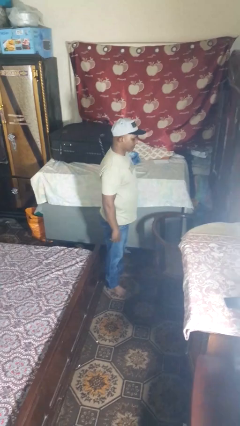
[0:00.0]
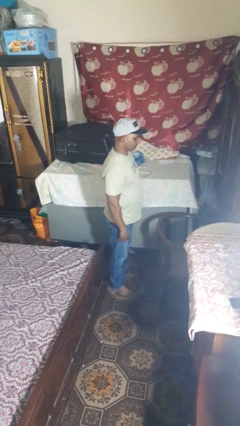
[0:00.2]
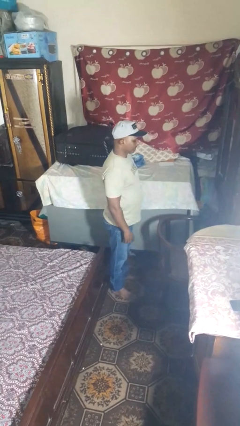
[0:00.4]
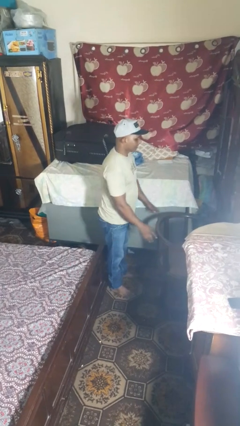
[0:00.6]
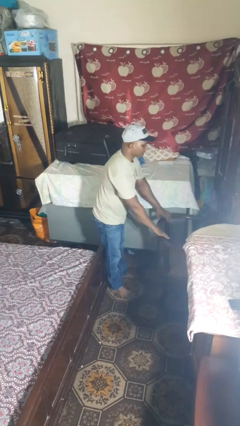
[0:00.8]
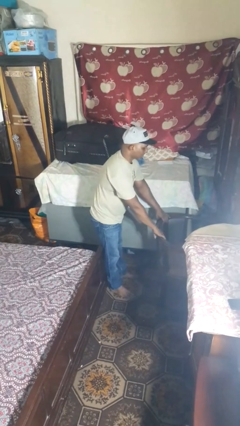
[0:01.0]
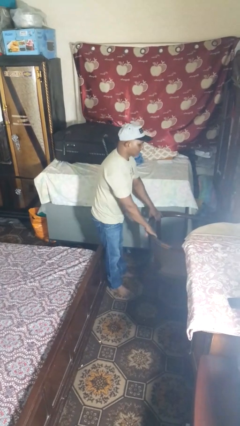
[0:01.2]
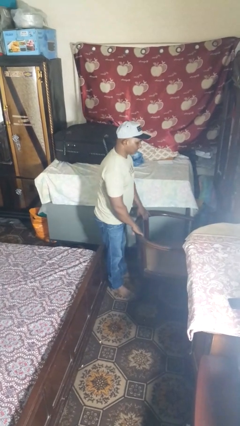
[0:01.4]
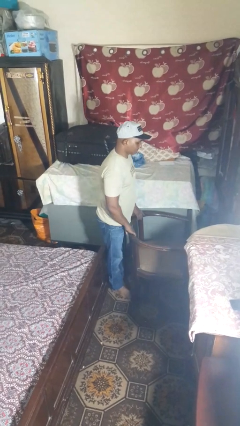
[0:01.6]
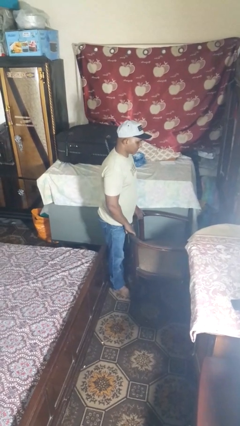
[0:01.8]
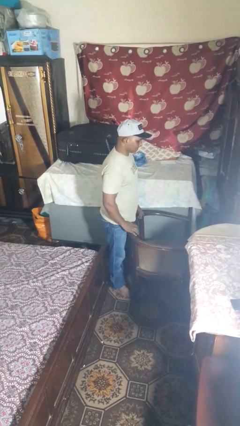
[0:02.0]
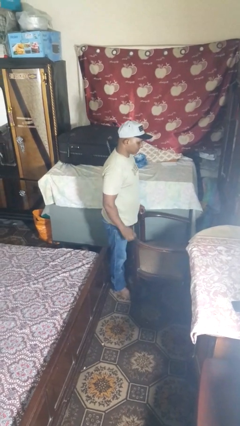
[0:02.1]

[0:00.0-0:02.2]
person pulls out chair

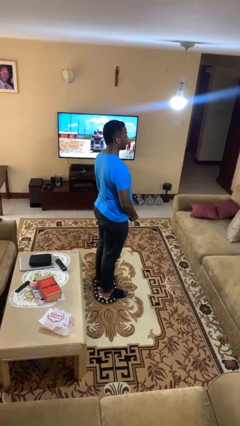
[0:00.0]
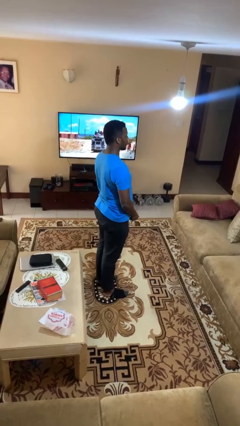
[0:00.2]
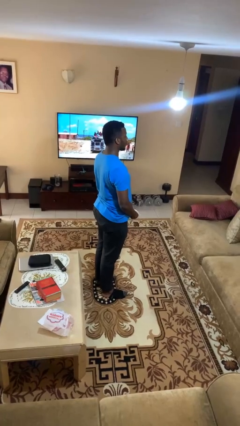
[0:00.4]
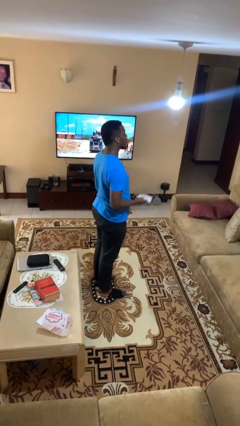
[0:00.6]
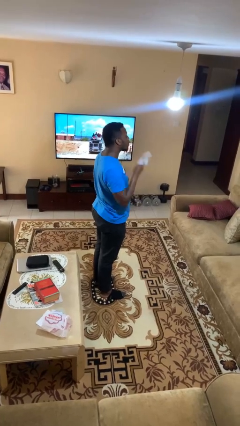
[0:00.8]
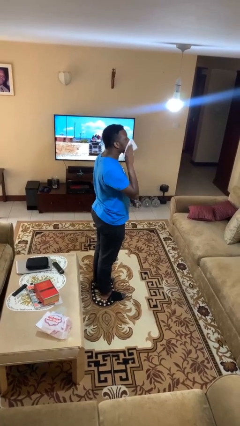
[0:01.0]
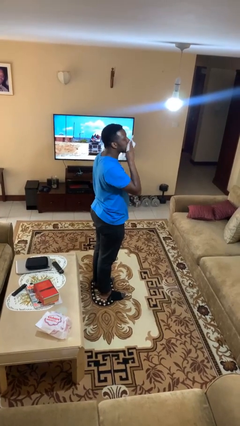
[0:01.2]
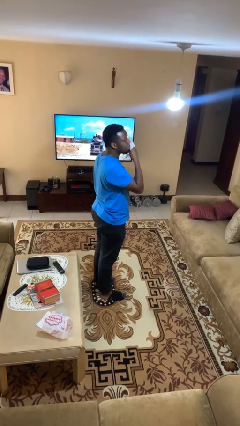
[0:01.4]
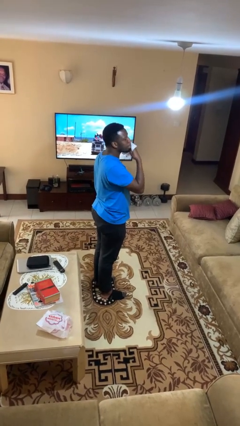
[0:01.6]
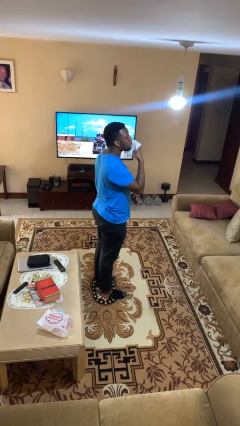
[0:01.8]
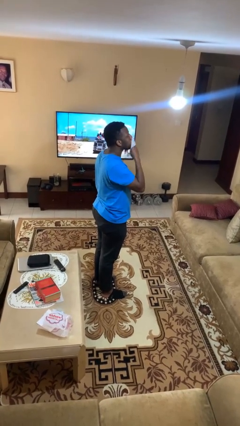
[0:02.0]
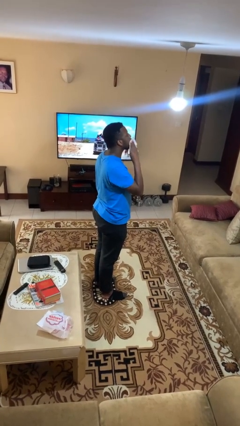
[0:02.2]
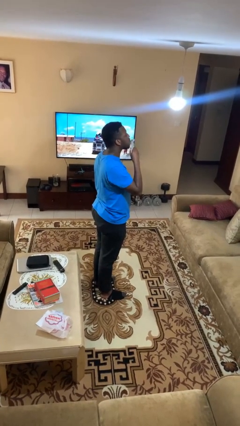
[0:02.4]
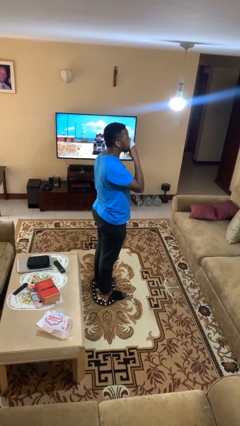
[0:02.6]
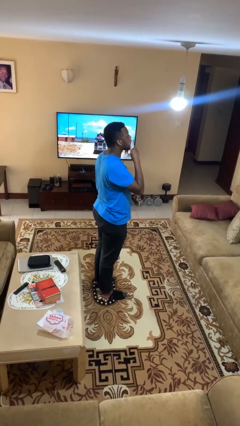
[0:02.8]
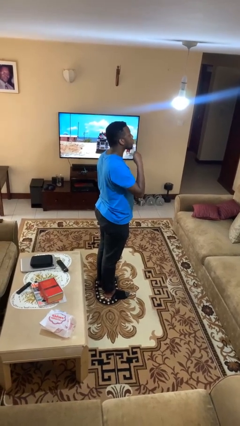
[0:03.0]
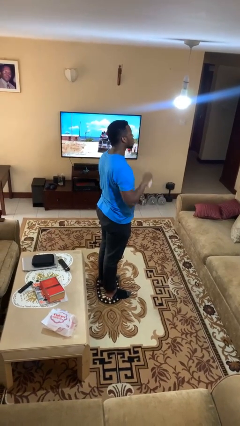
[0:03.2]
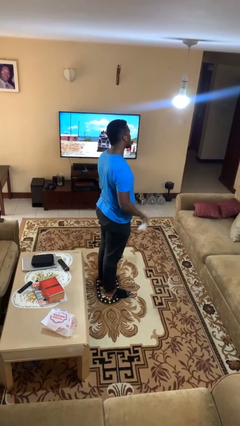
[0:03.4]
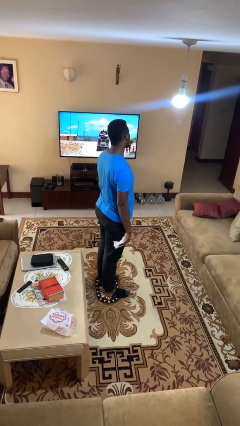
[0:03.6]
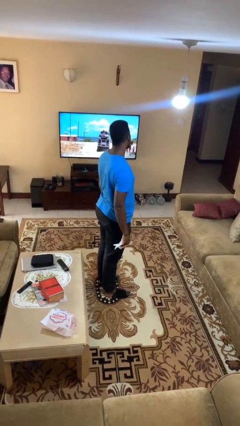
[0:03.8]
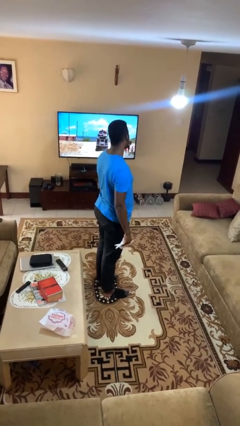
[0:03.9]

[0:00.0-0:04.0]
person wipes mouth with napkin

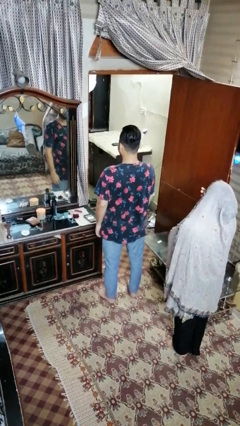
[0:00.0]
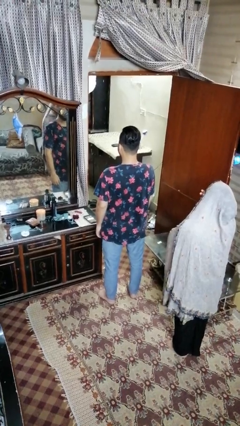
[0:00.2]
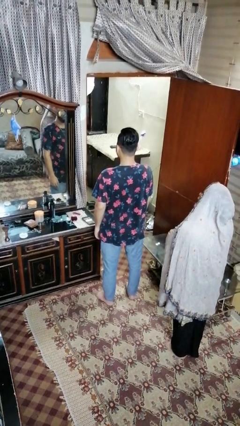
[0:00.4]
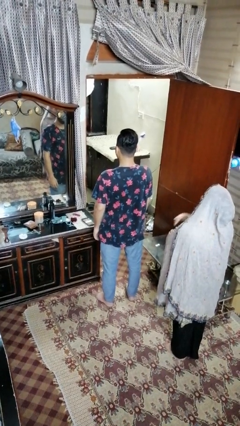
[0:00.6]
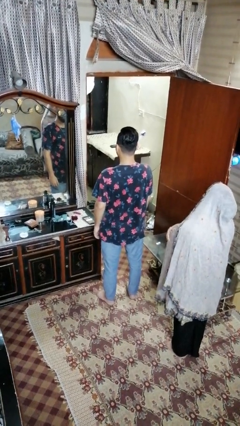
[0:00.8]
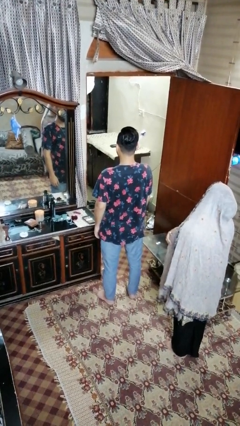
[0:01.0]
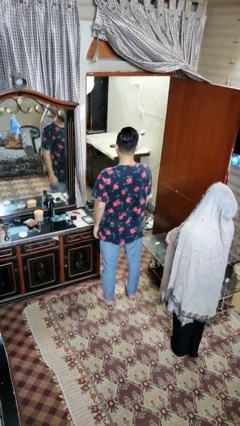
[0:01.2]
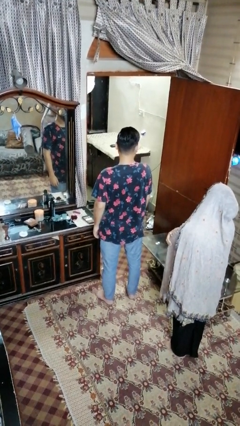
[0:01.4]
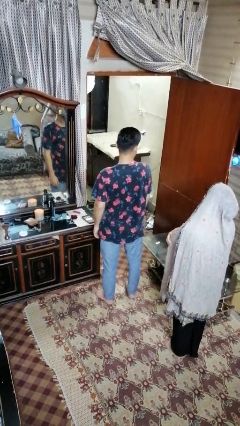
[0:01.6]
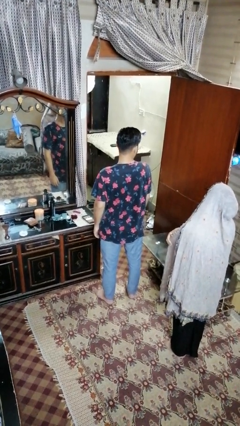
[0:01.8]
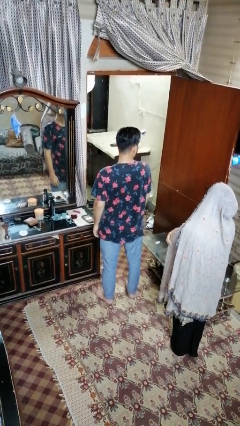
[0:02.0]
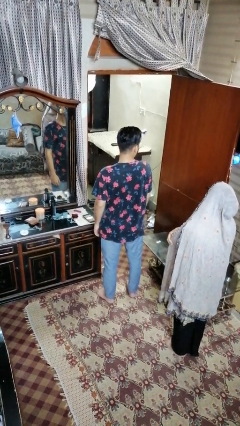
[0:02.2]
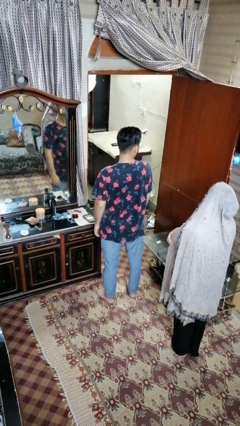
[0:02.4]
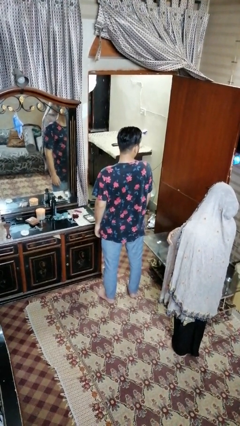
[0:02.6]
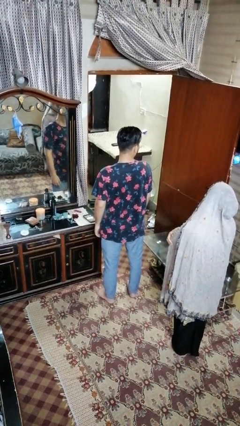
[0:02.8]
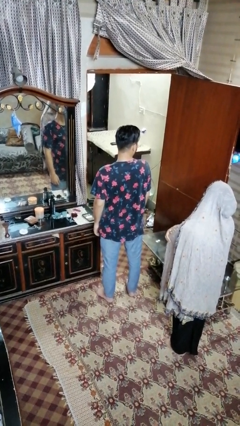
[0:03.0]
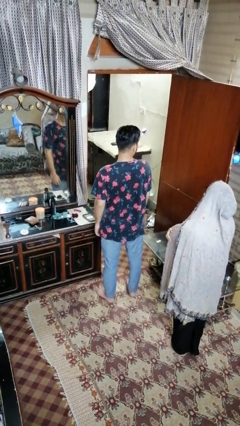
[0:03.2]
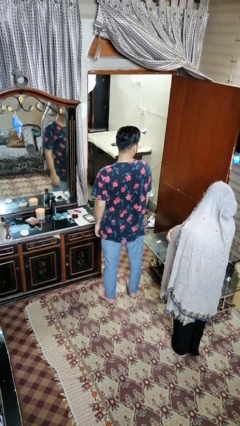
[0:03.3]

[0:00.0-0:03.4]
person looks over shoulder

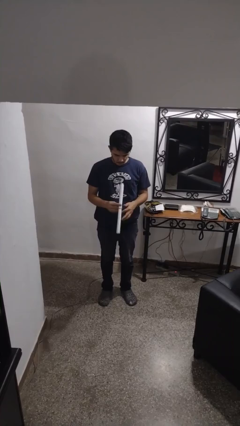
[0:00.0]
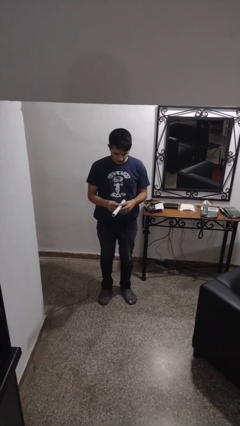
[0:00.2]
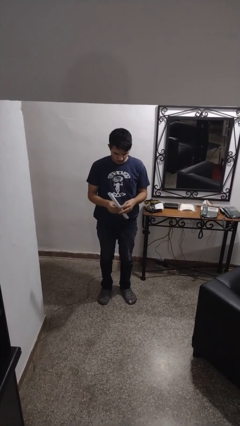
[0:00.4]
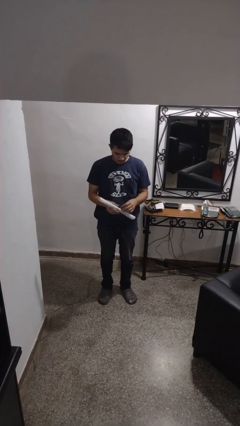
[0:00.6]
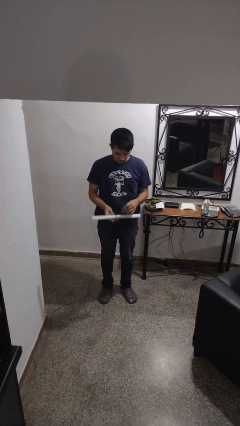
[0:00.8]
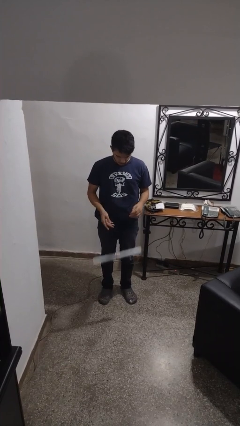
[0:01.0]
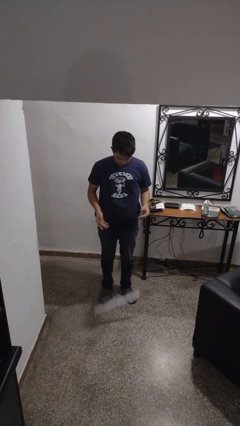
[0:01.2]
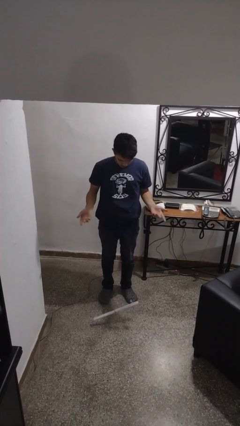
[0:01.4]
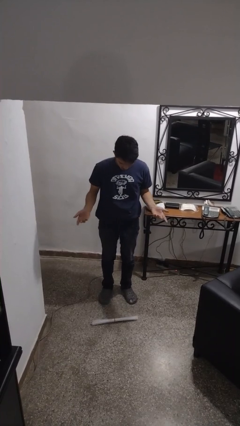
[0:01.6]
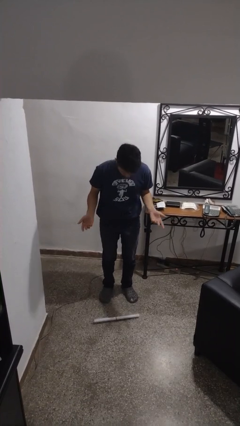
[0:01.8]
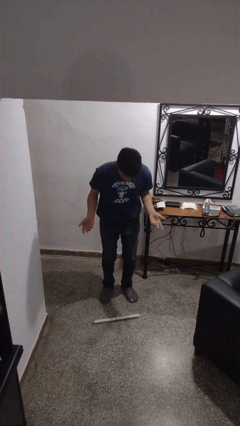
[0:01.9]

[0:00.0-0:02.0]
person drops object

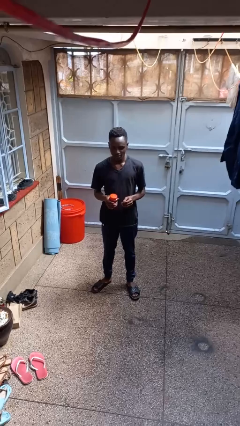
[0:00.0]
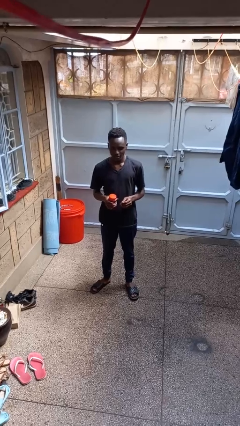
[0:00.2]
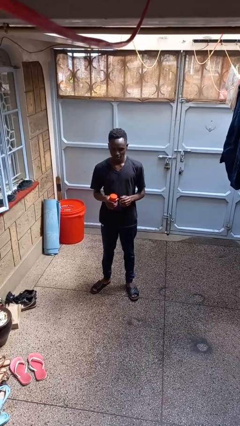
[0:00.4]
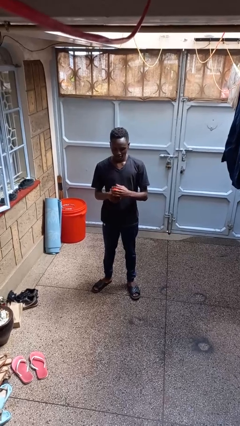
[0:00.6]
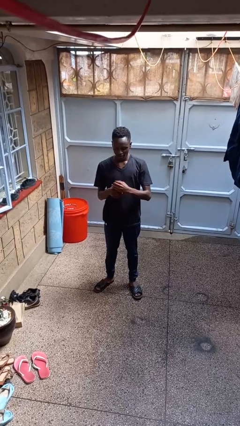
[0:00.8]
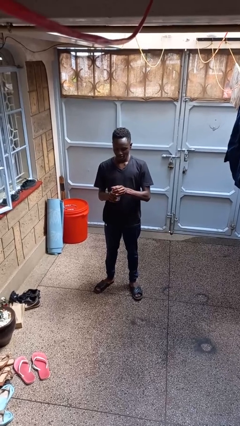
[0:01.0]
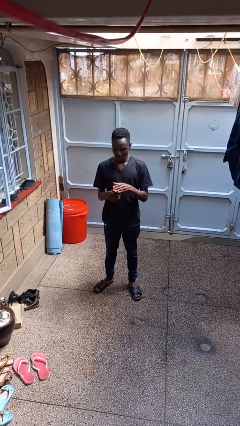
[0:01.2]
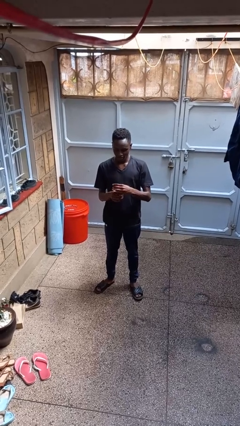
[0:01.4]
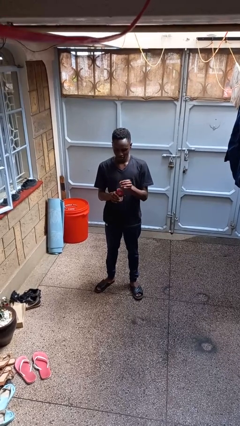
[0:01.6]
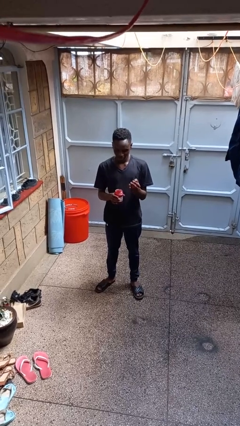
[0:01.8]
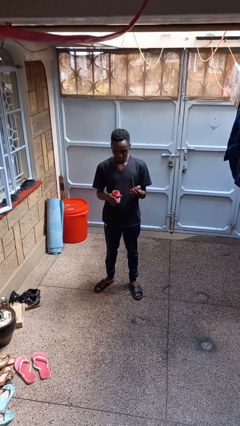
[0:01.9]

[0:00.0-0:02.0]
person opens jar

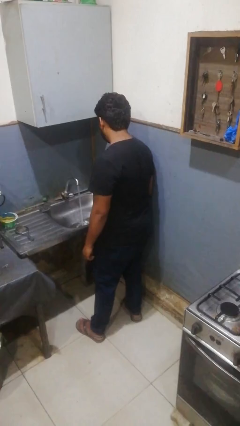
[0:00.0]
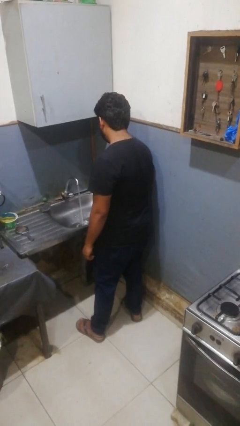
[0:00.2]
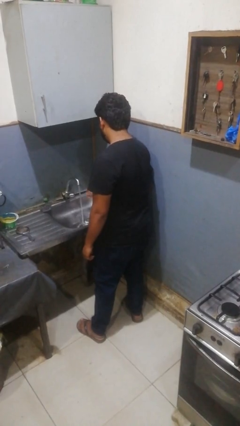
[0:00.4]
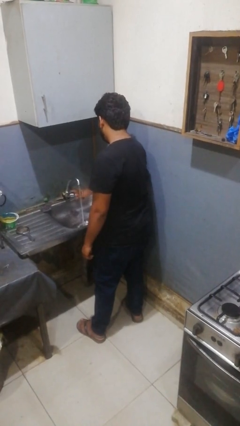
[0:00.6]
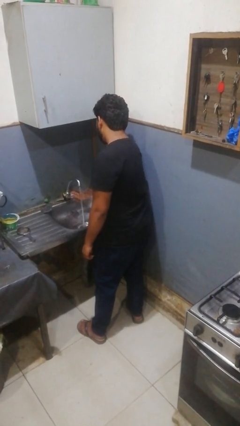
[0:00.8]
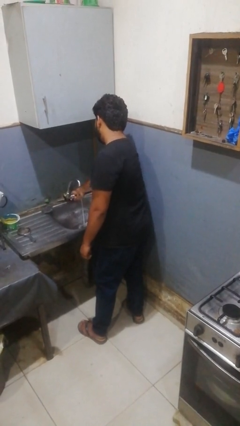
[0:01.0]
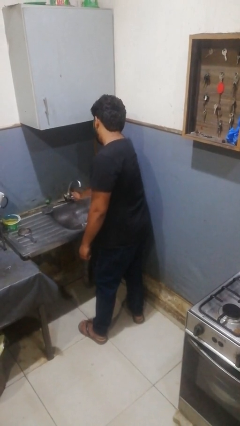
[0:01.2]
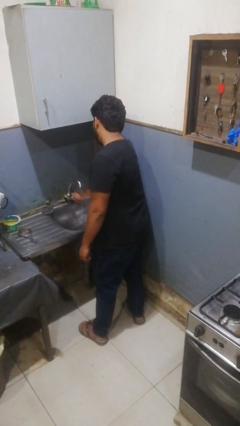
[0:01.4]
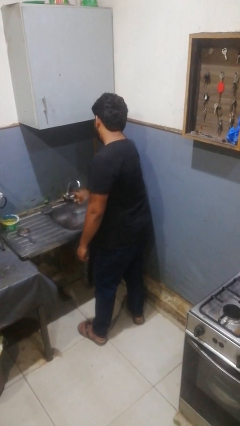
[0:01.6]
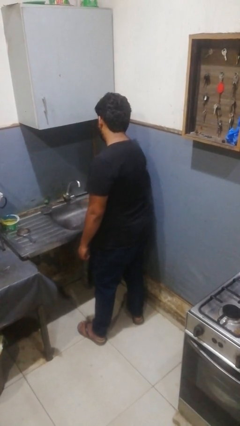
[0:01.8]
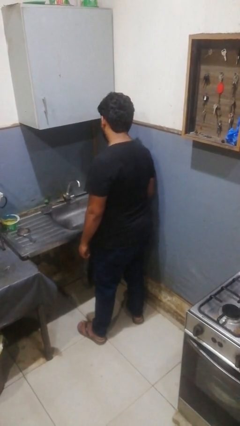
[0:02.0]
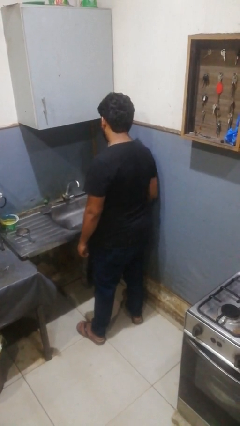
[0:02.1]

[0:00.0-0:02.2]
person turns off faucet

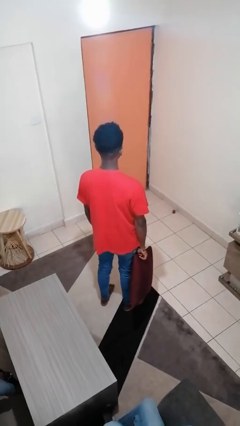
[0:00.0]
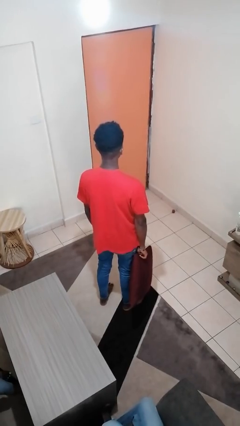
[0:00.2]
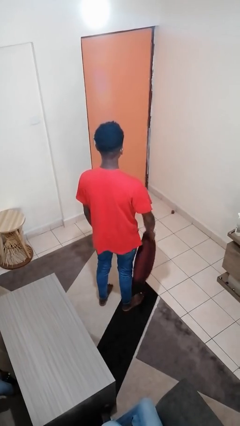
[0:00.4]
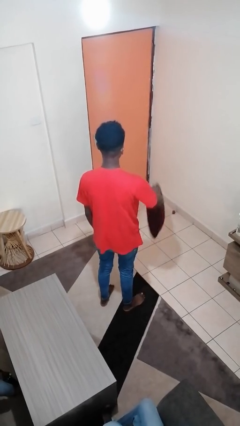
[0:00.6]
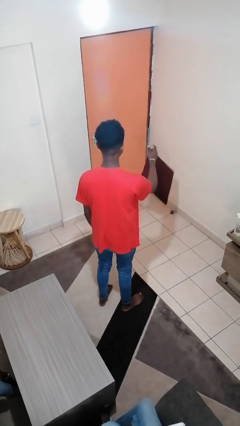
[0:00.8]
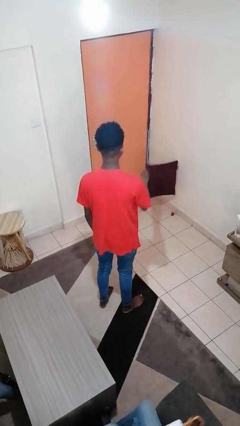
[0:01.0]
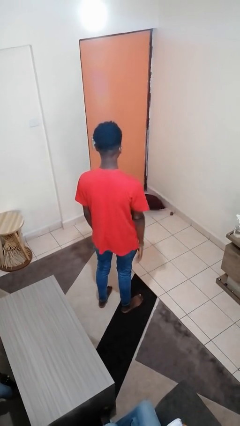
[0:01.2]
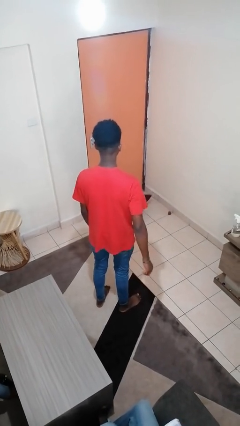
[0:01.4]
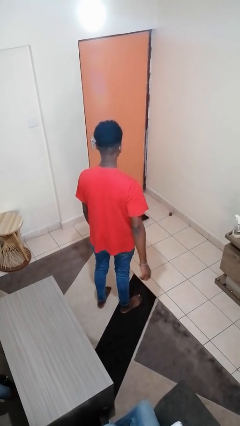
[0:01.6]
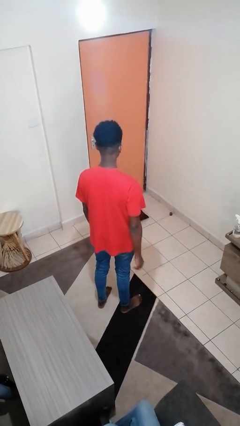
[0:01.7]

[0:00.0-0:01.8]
person throws object to ground
